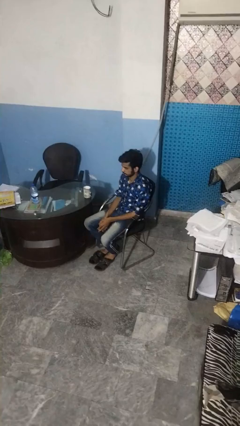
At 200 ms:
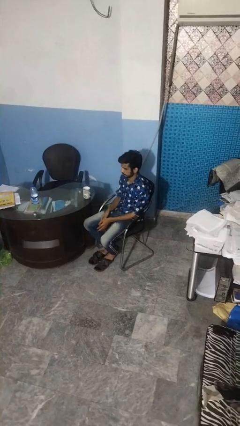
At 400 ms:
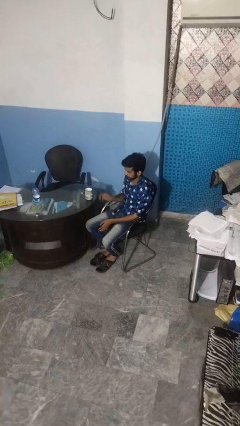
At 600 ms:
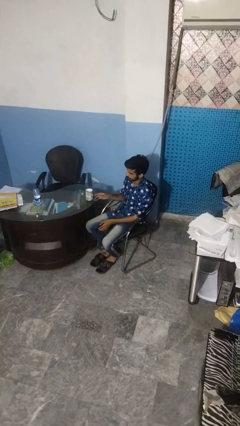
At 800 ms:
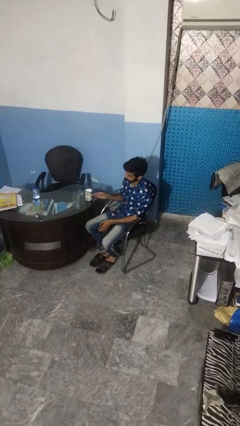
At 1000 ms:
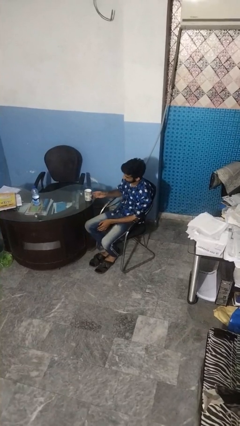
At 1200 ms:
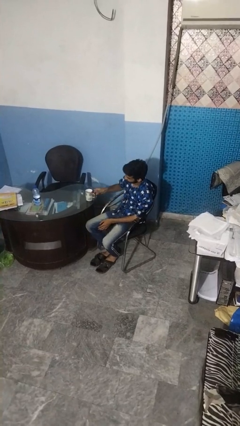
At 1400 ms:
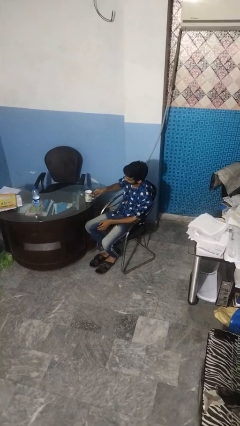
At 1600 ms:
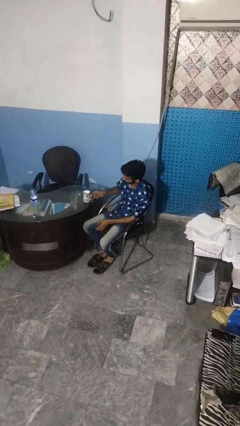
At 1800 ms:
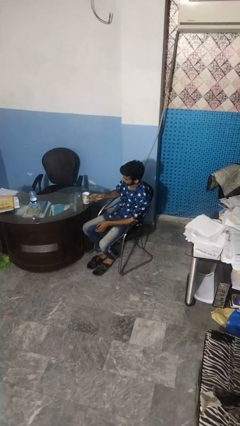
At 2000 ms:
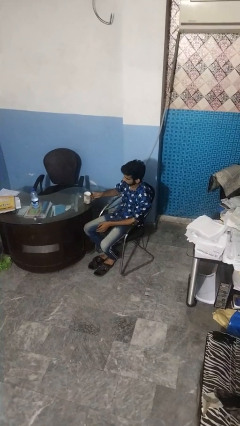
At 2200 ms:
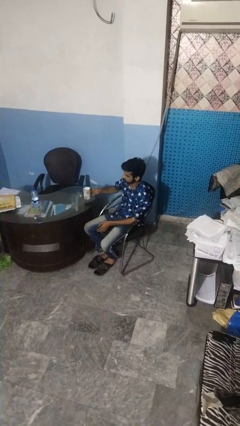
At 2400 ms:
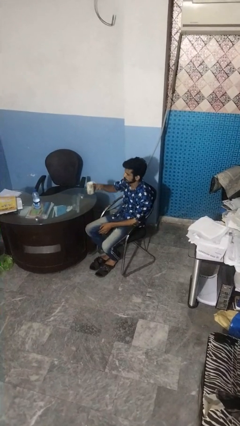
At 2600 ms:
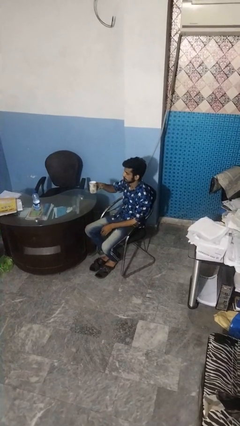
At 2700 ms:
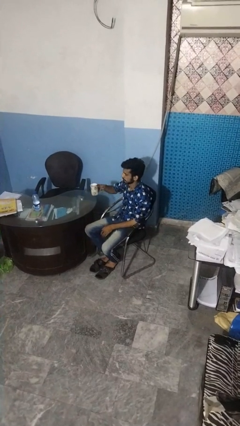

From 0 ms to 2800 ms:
person picks up object from table

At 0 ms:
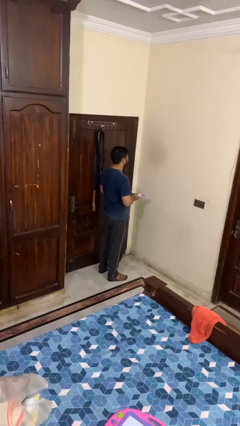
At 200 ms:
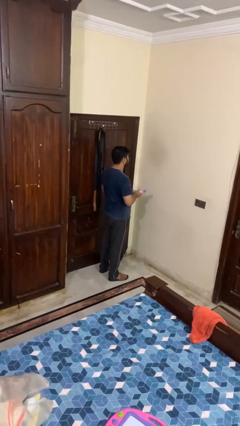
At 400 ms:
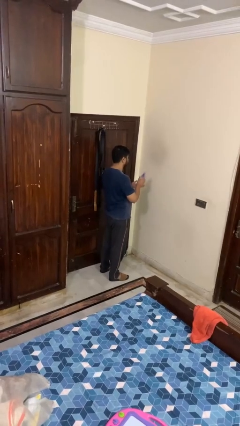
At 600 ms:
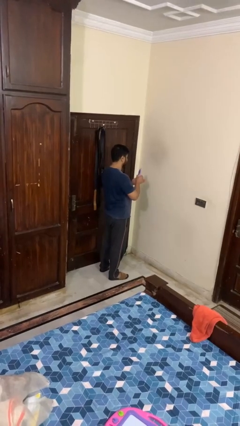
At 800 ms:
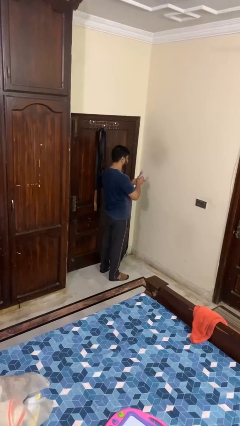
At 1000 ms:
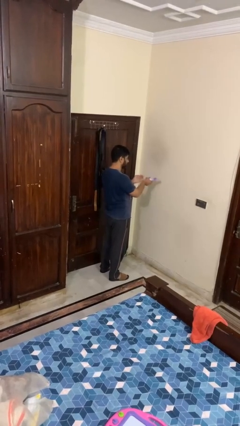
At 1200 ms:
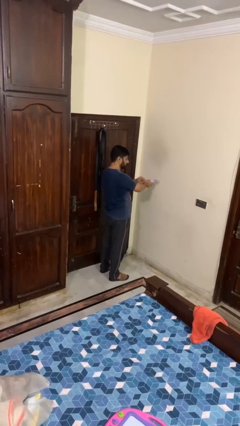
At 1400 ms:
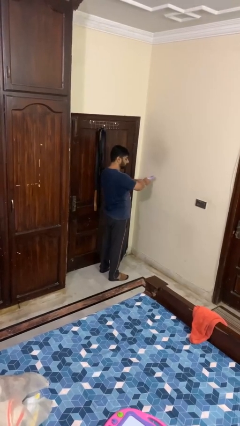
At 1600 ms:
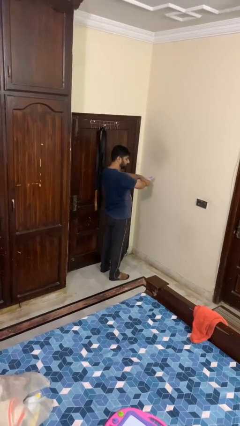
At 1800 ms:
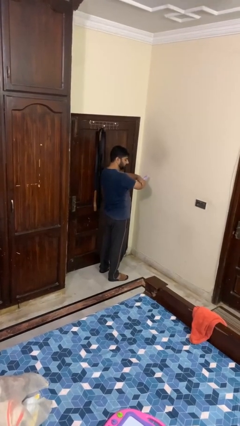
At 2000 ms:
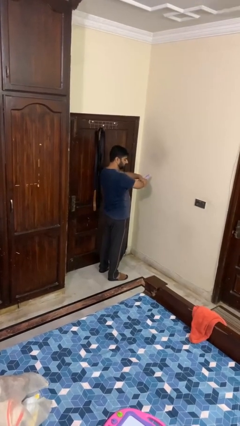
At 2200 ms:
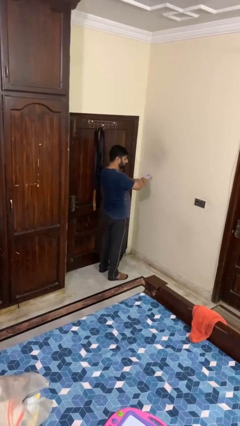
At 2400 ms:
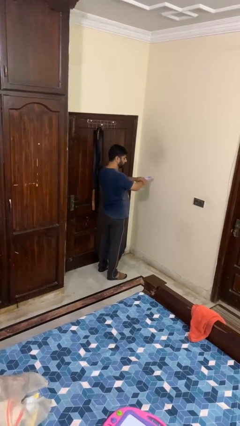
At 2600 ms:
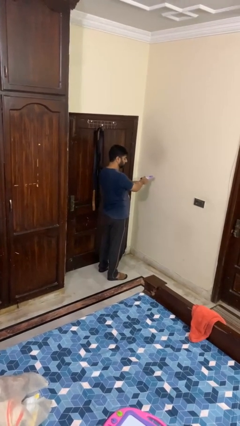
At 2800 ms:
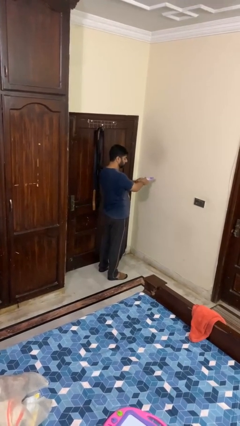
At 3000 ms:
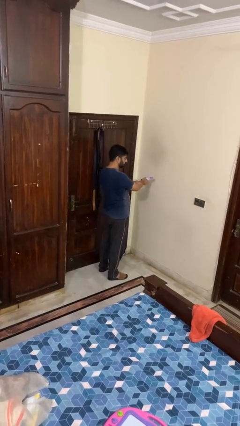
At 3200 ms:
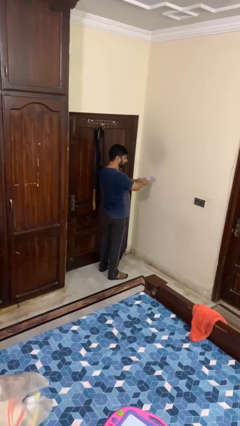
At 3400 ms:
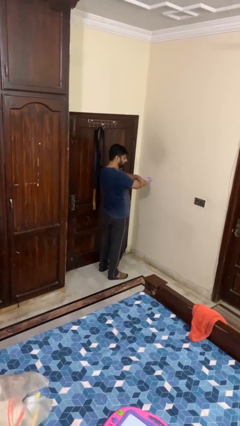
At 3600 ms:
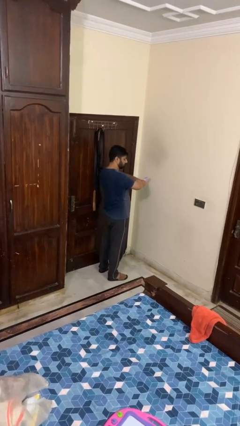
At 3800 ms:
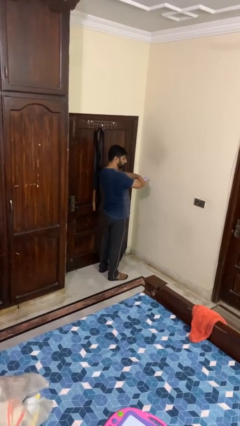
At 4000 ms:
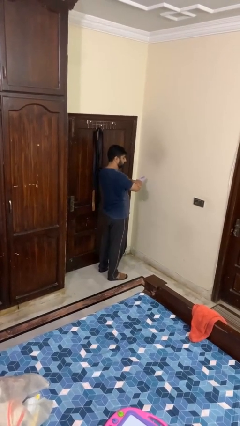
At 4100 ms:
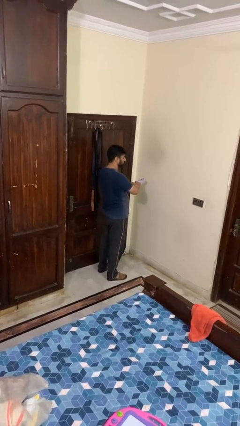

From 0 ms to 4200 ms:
person applies sunscreen

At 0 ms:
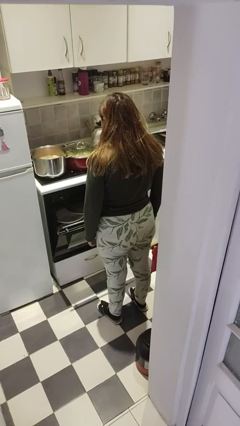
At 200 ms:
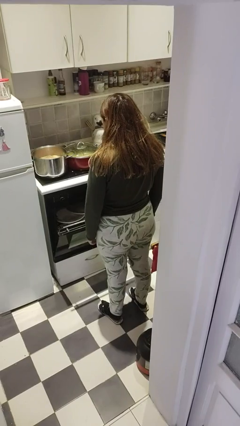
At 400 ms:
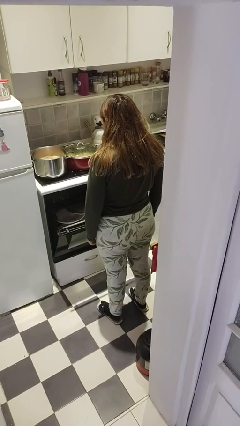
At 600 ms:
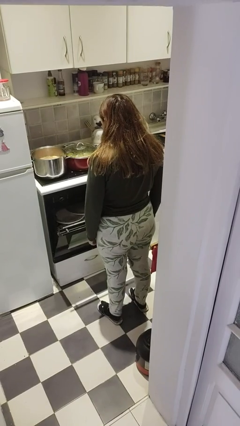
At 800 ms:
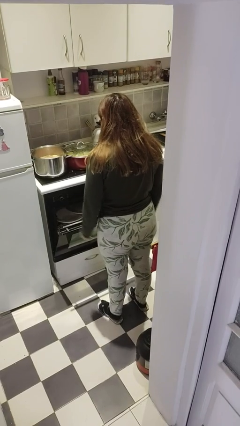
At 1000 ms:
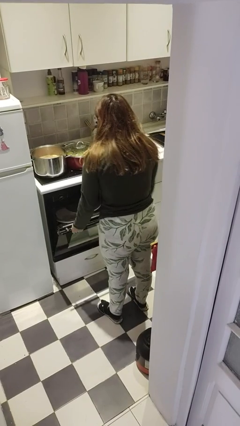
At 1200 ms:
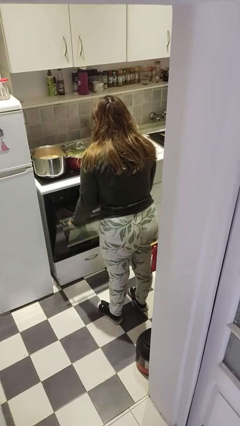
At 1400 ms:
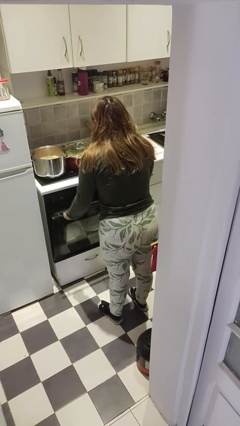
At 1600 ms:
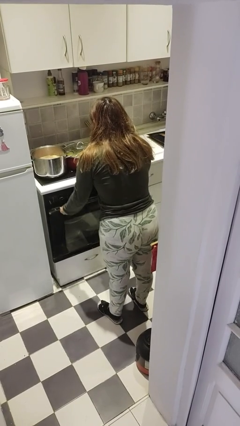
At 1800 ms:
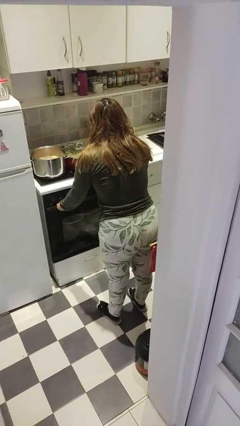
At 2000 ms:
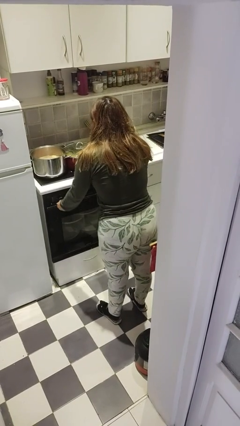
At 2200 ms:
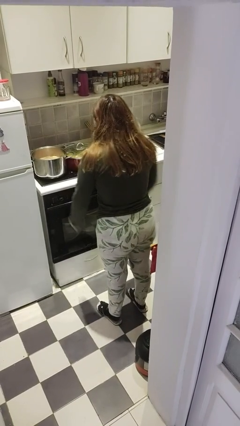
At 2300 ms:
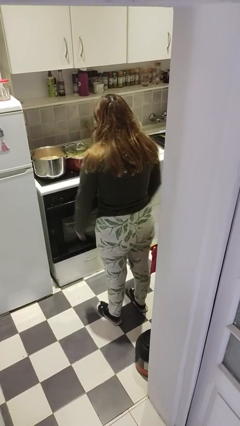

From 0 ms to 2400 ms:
person closes dishwasher

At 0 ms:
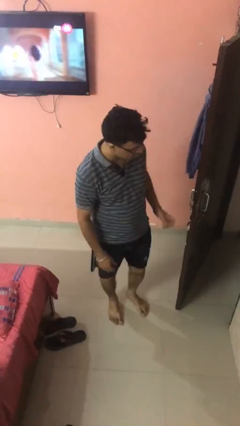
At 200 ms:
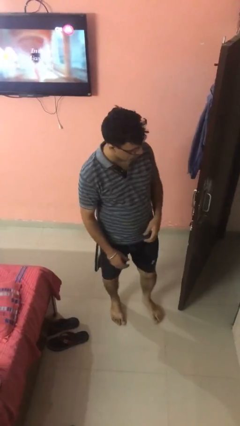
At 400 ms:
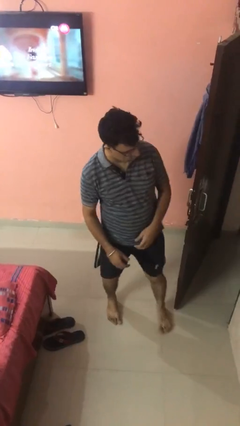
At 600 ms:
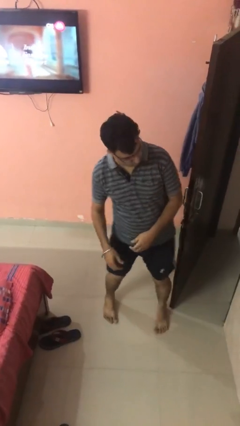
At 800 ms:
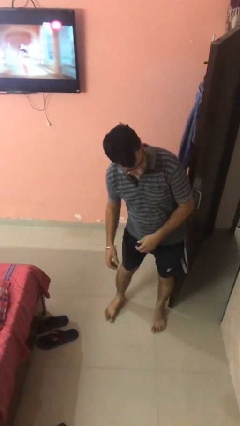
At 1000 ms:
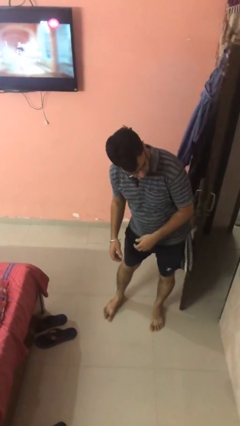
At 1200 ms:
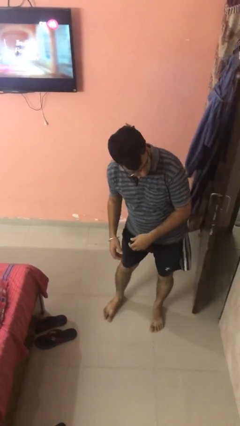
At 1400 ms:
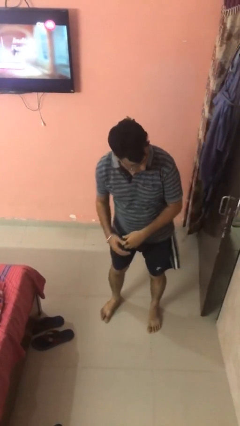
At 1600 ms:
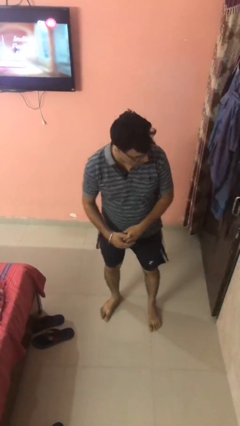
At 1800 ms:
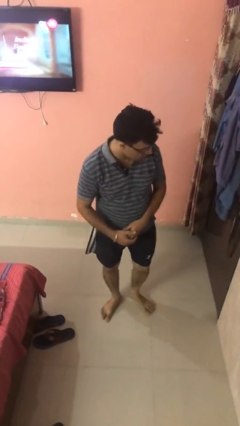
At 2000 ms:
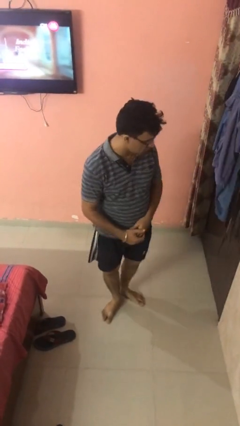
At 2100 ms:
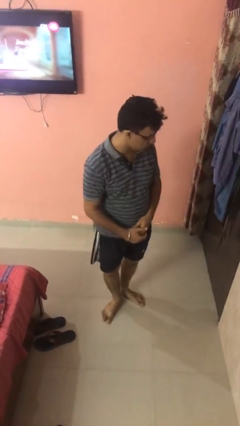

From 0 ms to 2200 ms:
person closes door with hip

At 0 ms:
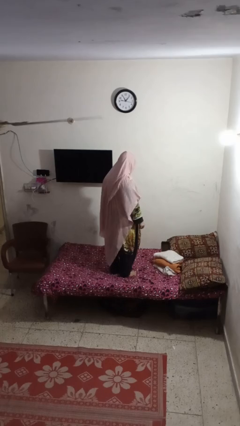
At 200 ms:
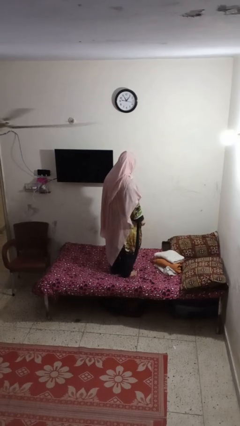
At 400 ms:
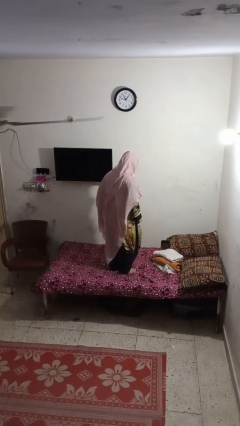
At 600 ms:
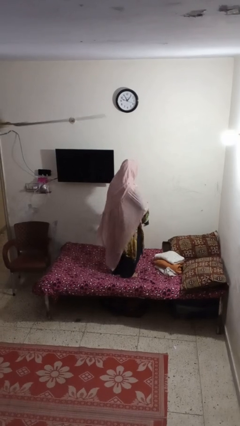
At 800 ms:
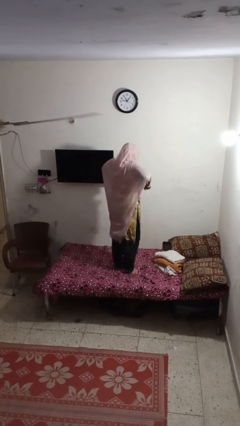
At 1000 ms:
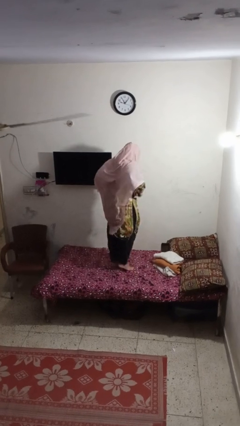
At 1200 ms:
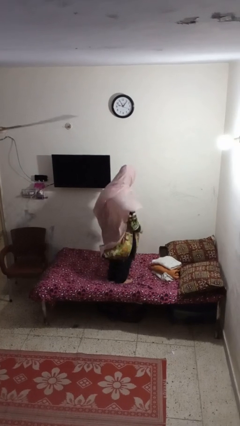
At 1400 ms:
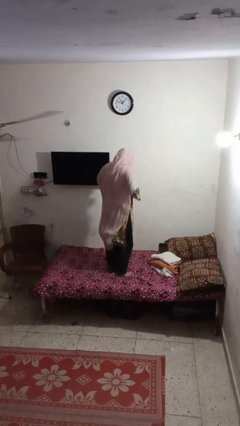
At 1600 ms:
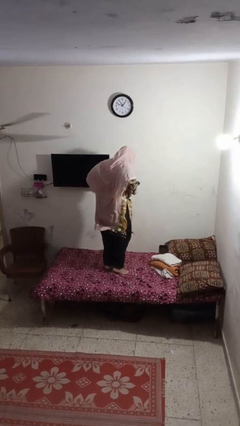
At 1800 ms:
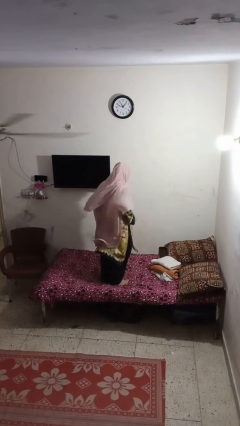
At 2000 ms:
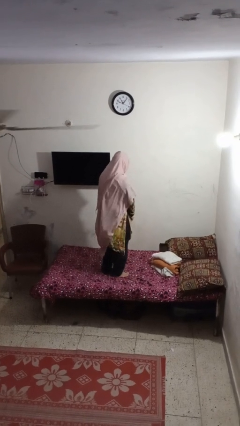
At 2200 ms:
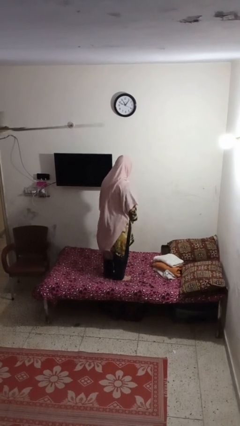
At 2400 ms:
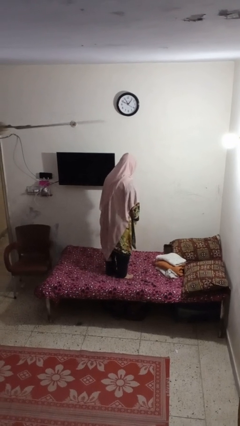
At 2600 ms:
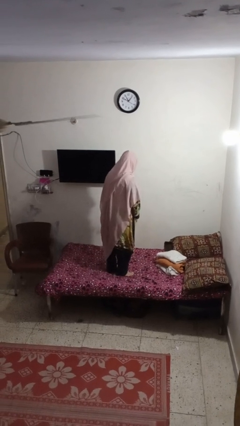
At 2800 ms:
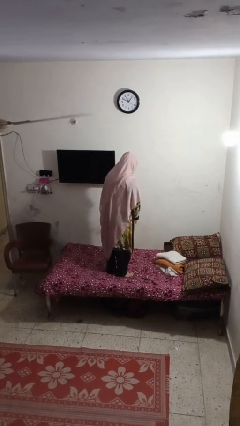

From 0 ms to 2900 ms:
person jumps on bed

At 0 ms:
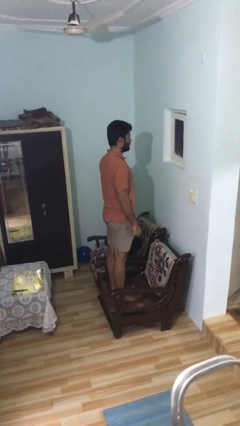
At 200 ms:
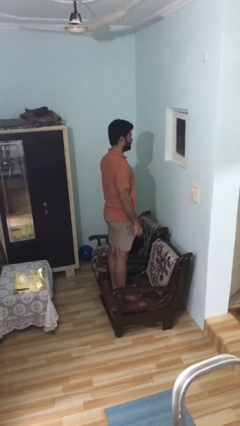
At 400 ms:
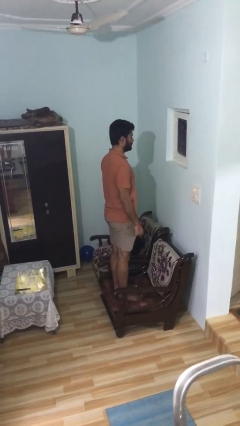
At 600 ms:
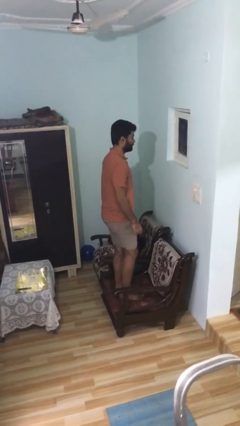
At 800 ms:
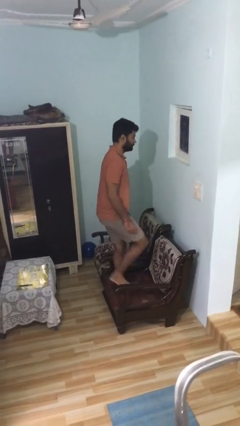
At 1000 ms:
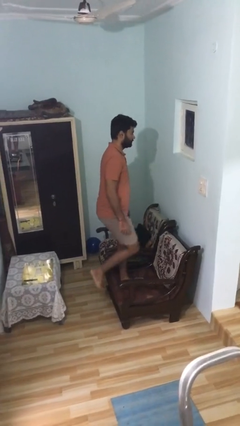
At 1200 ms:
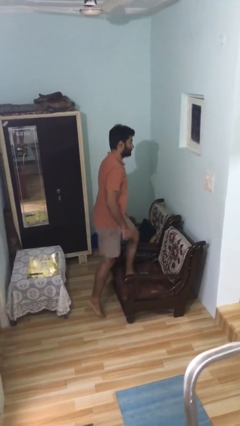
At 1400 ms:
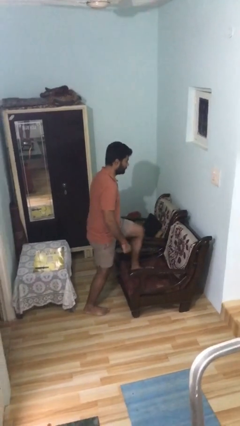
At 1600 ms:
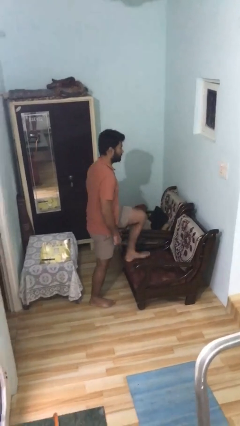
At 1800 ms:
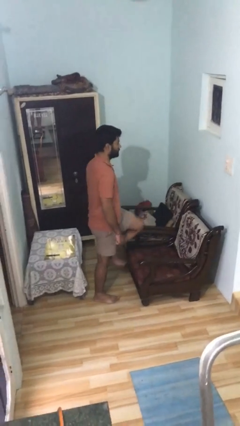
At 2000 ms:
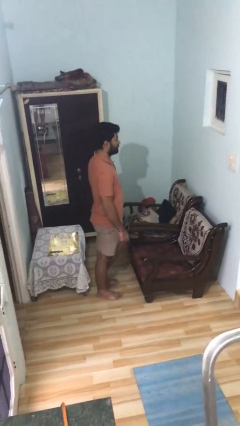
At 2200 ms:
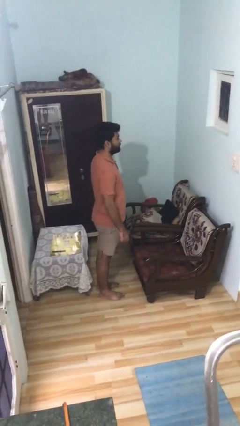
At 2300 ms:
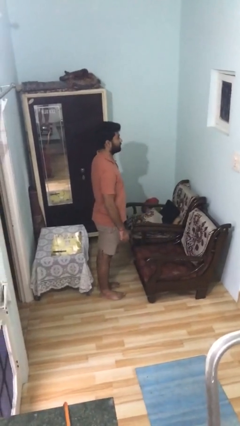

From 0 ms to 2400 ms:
person climbs off couch

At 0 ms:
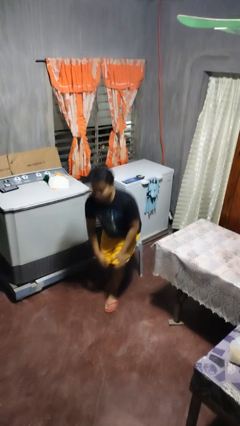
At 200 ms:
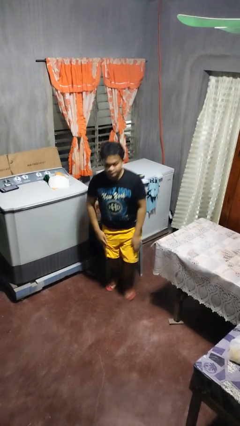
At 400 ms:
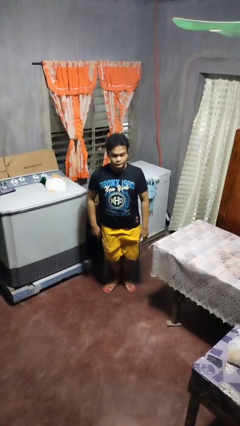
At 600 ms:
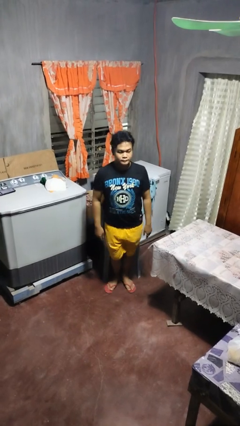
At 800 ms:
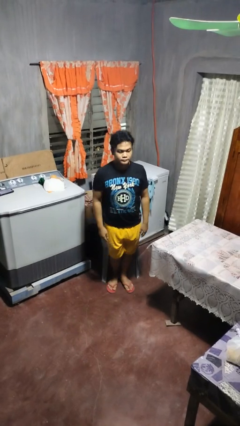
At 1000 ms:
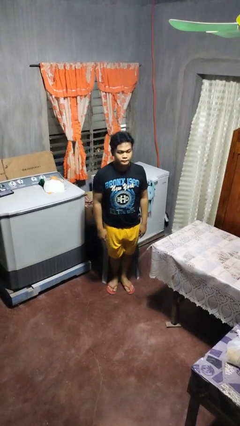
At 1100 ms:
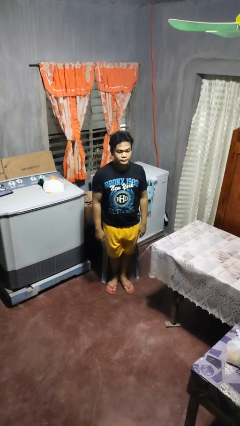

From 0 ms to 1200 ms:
person stands up from floor
